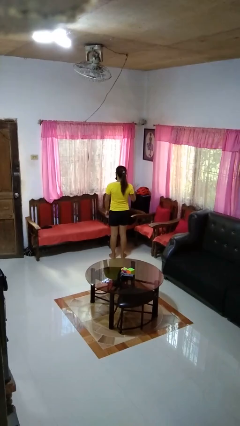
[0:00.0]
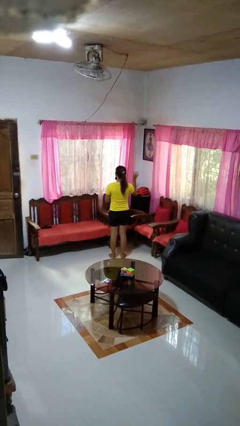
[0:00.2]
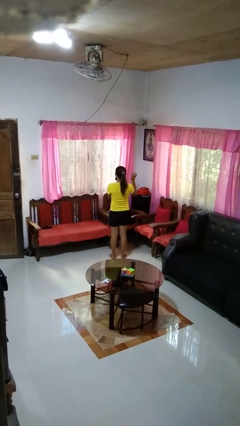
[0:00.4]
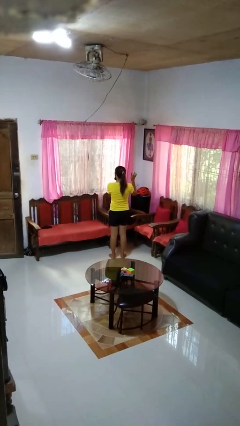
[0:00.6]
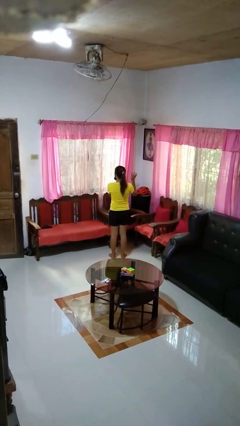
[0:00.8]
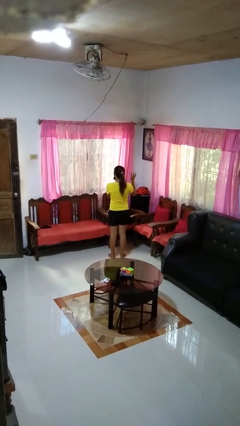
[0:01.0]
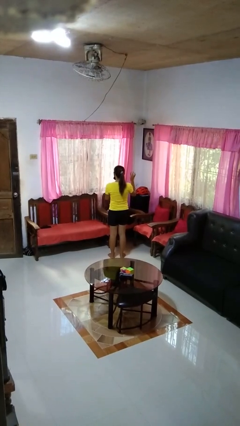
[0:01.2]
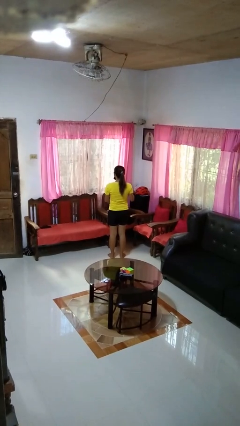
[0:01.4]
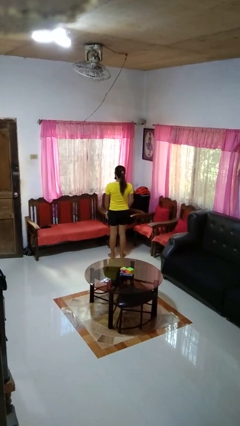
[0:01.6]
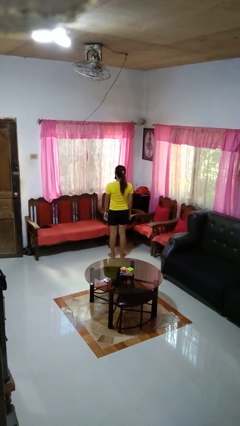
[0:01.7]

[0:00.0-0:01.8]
person gestures number four

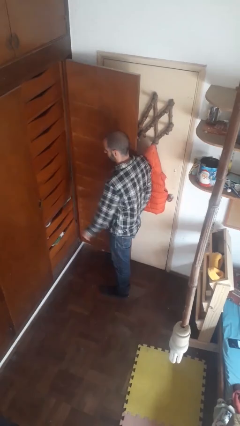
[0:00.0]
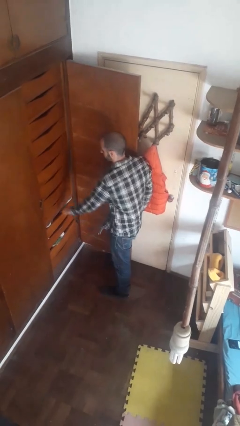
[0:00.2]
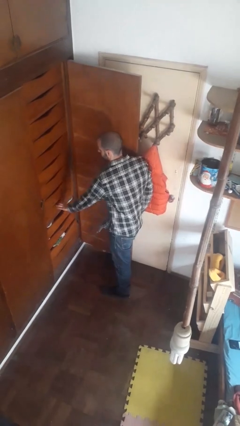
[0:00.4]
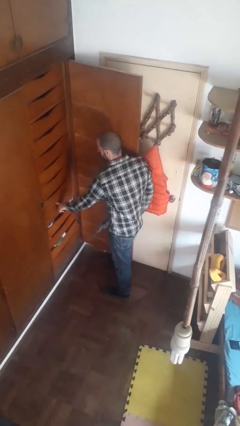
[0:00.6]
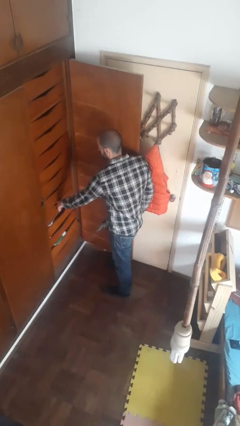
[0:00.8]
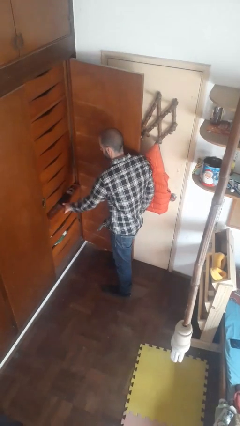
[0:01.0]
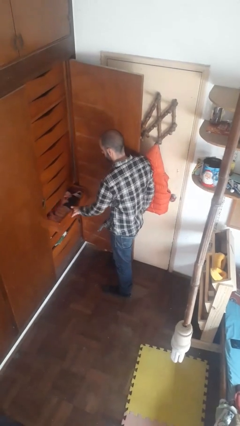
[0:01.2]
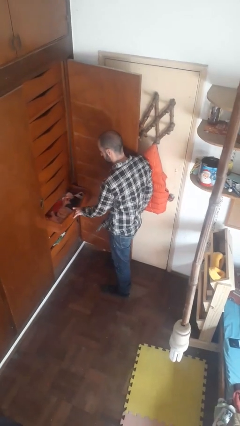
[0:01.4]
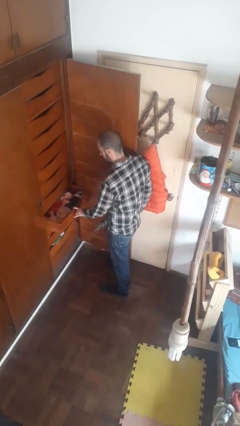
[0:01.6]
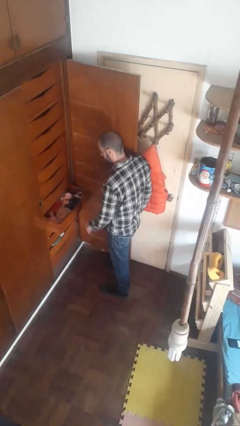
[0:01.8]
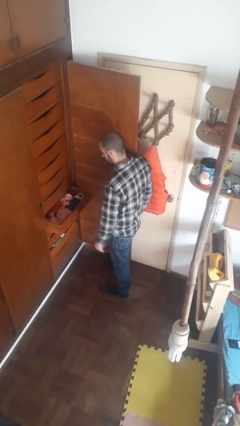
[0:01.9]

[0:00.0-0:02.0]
person opens dresser drawer

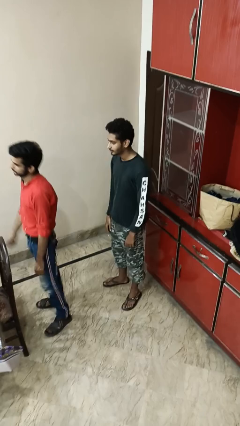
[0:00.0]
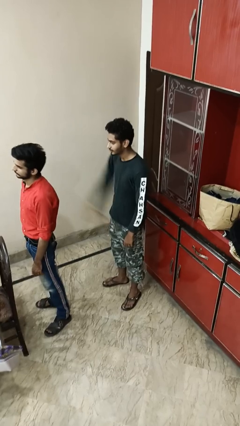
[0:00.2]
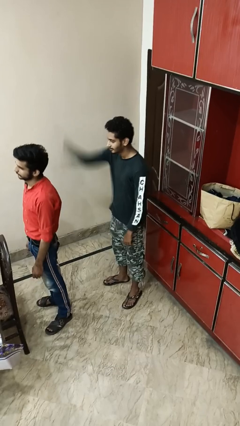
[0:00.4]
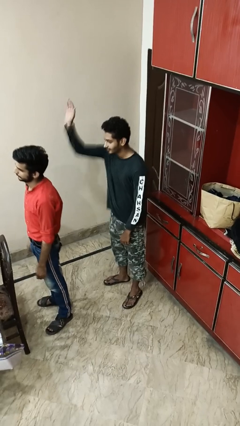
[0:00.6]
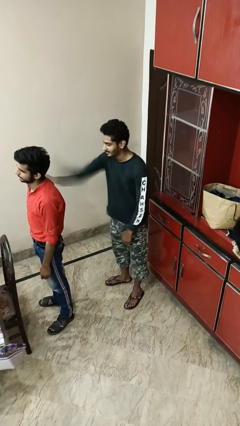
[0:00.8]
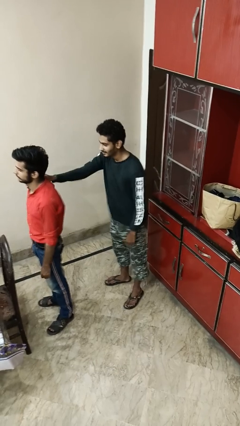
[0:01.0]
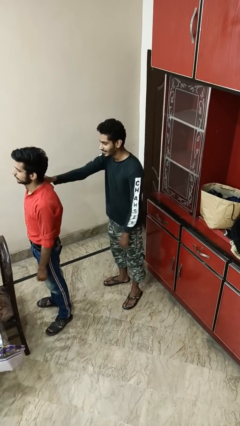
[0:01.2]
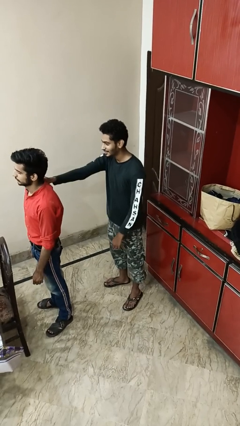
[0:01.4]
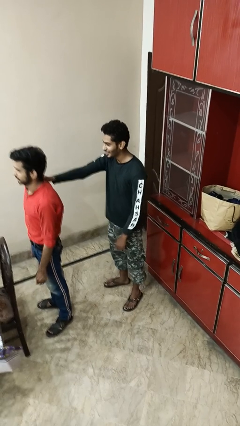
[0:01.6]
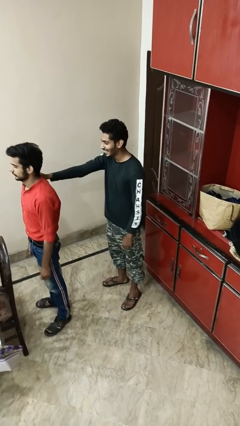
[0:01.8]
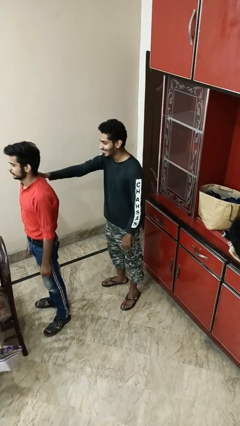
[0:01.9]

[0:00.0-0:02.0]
person grabs person by shoulder

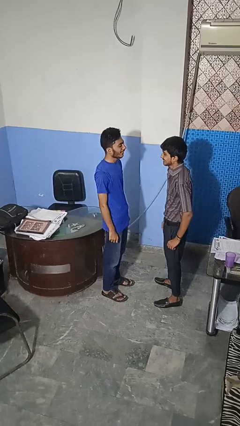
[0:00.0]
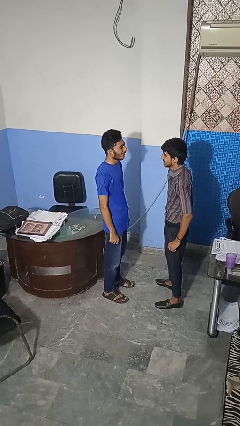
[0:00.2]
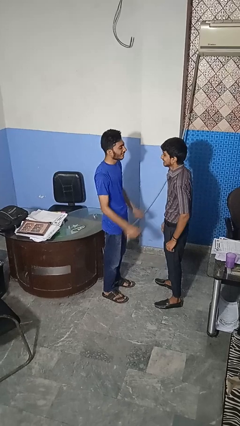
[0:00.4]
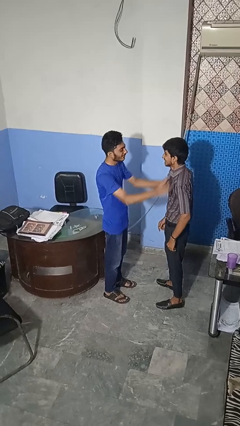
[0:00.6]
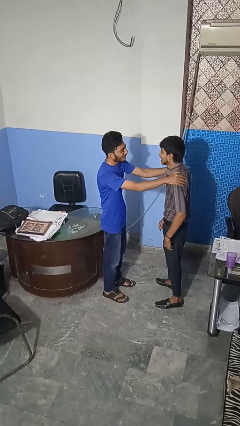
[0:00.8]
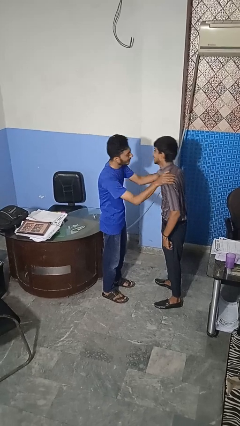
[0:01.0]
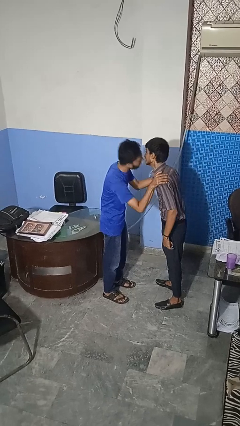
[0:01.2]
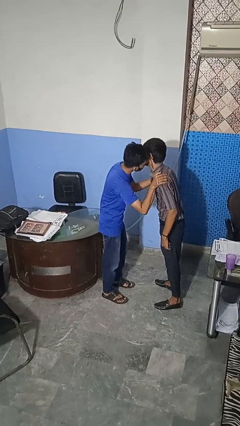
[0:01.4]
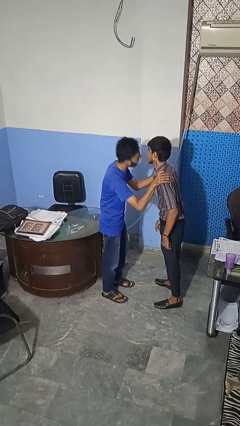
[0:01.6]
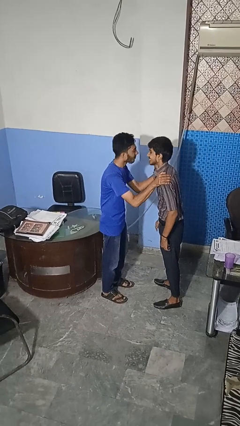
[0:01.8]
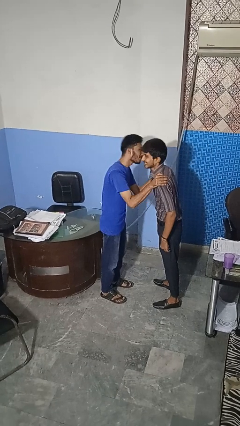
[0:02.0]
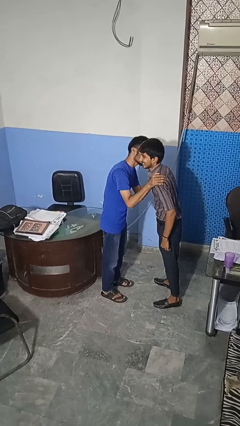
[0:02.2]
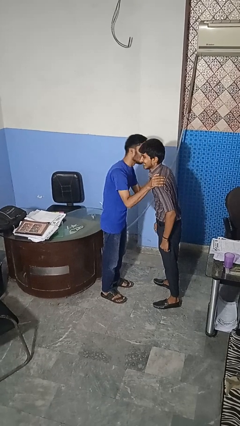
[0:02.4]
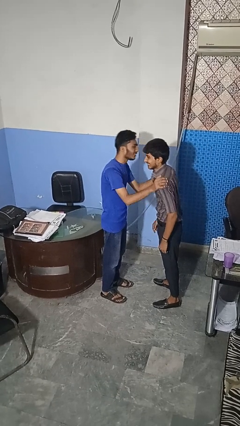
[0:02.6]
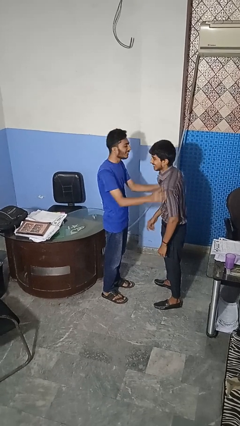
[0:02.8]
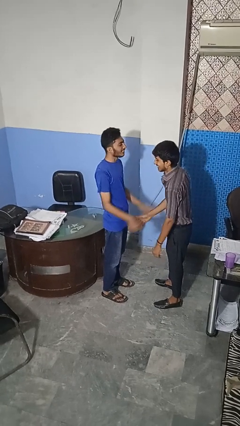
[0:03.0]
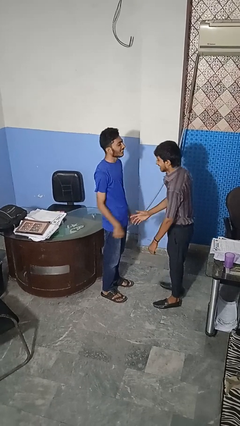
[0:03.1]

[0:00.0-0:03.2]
person kisses cheek of person

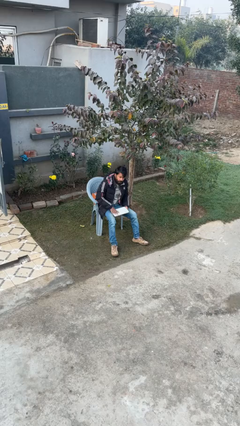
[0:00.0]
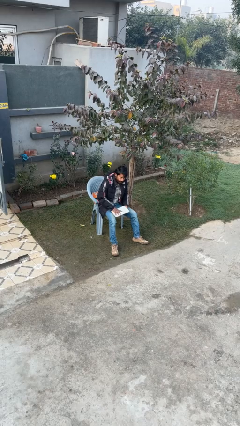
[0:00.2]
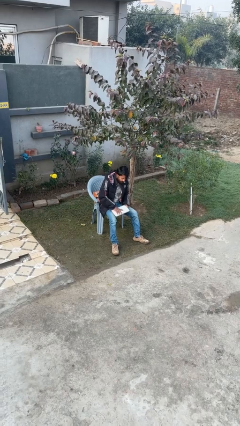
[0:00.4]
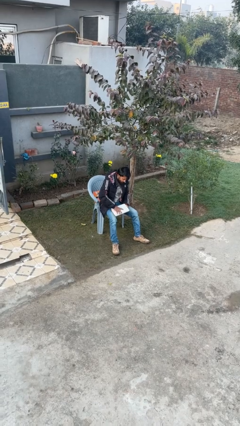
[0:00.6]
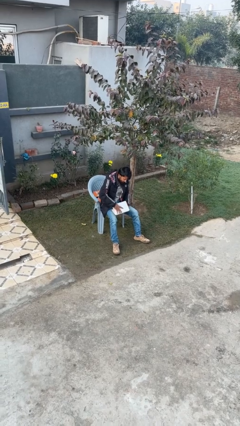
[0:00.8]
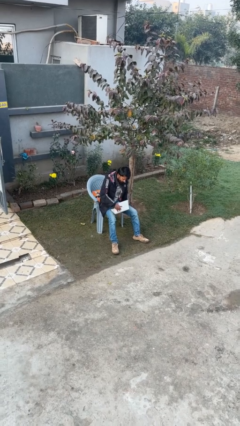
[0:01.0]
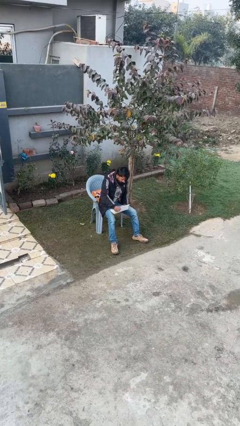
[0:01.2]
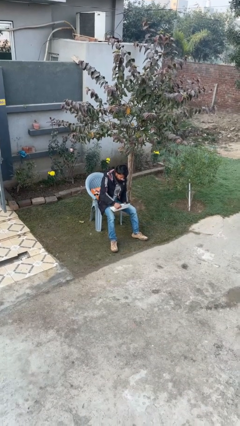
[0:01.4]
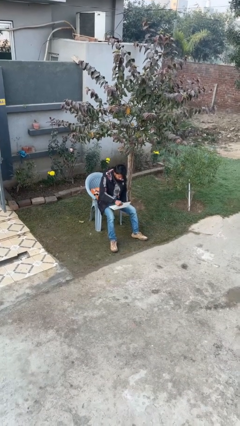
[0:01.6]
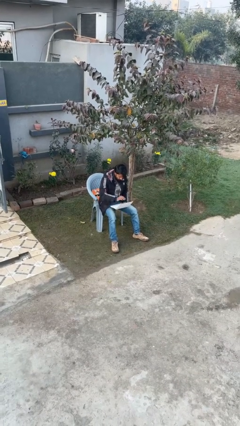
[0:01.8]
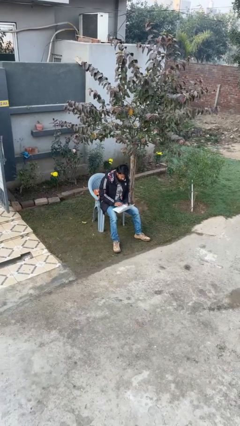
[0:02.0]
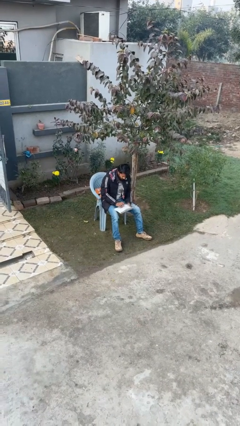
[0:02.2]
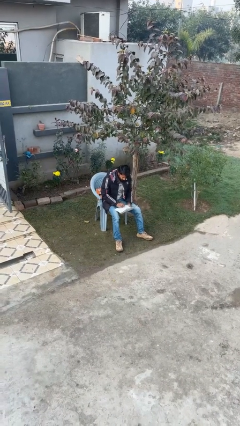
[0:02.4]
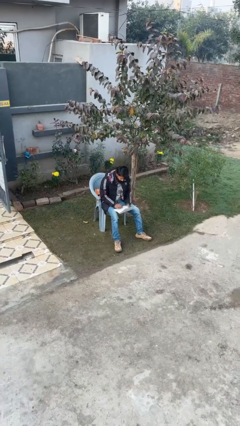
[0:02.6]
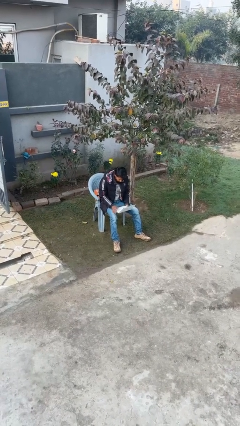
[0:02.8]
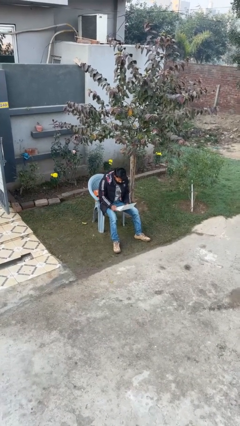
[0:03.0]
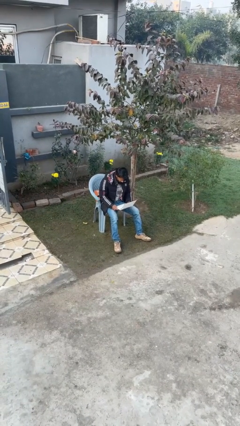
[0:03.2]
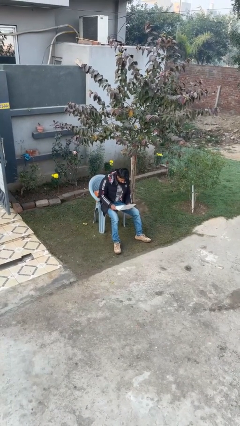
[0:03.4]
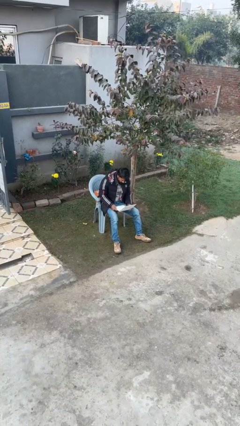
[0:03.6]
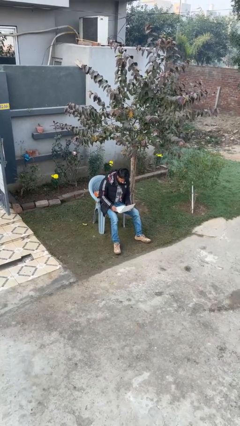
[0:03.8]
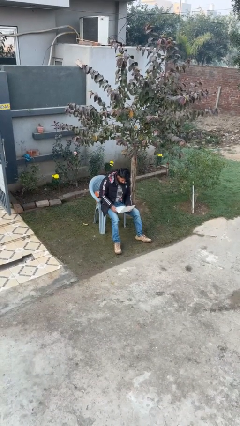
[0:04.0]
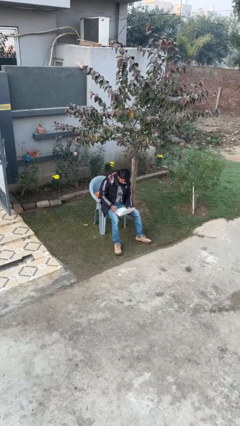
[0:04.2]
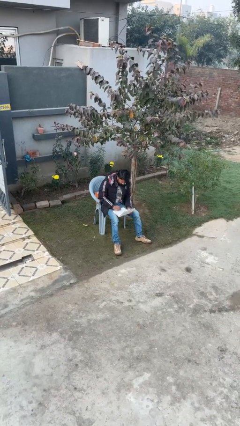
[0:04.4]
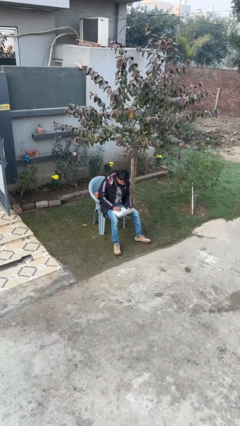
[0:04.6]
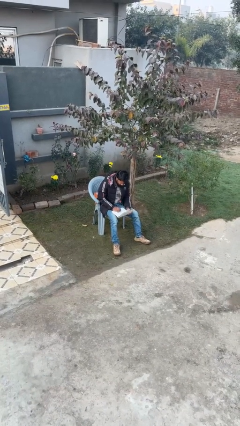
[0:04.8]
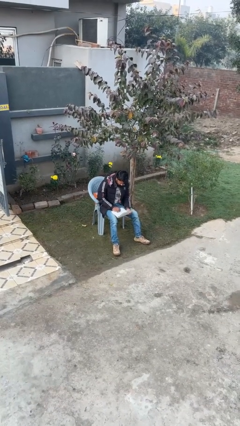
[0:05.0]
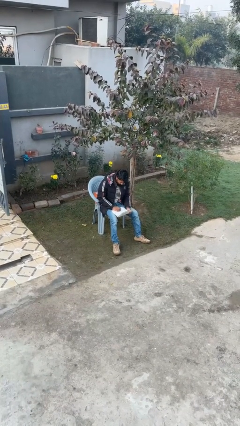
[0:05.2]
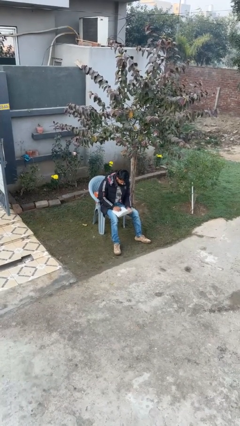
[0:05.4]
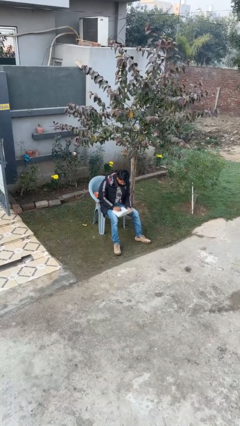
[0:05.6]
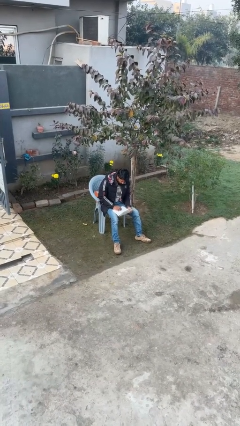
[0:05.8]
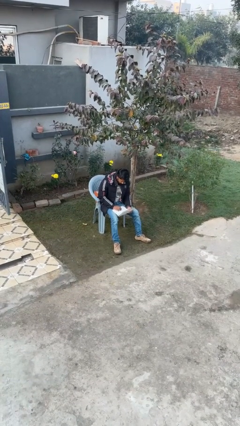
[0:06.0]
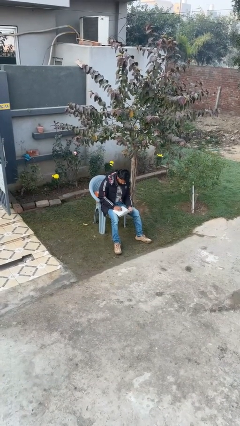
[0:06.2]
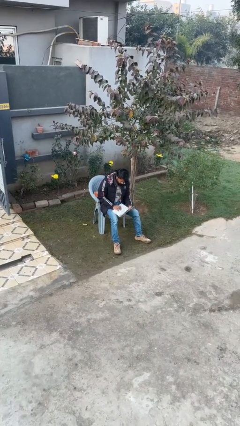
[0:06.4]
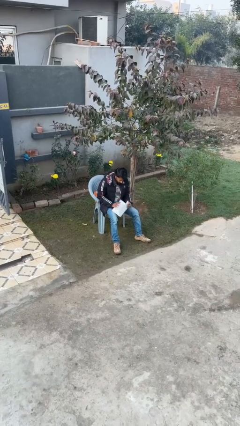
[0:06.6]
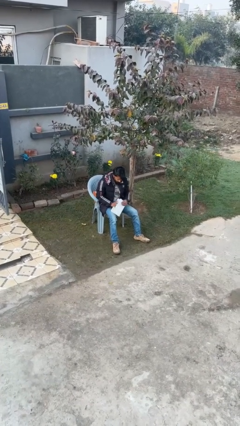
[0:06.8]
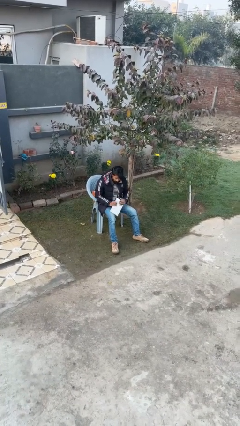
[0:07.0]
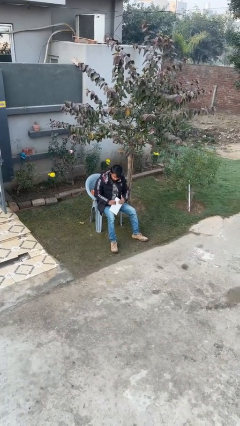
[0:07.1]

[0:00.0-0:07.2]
person interacts with laptop

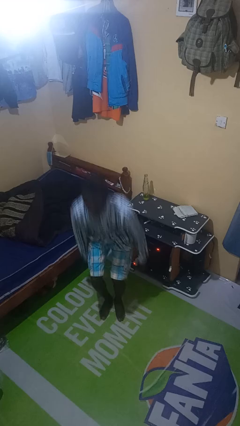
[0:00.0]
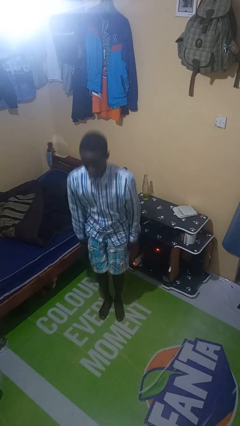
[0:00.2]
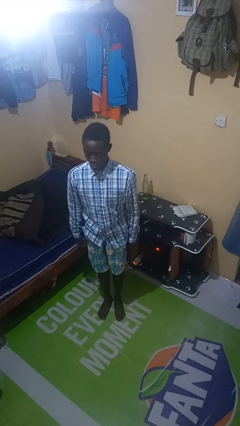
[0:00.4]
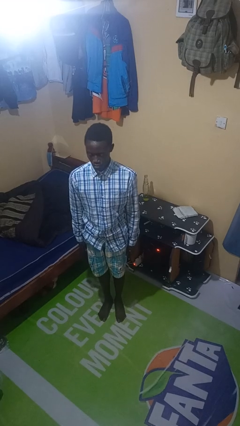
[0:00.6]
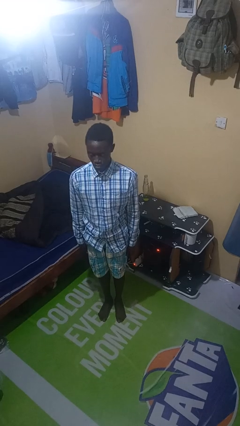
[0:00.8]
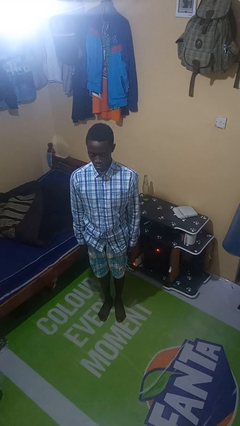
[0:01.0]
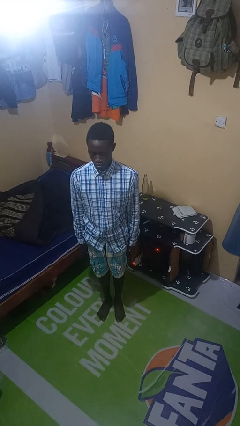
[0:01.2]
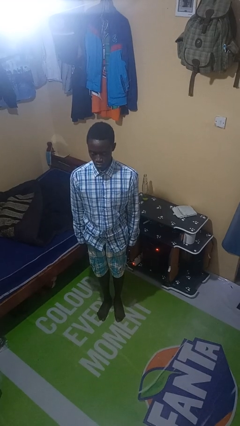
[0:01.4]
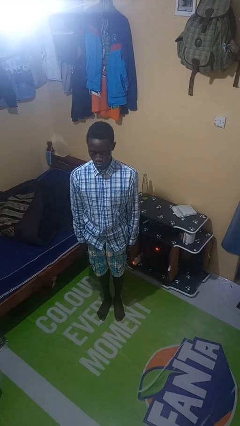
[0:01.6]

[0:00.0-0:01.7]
person stands up from floor
